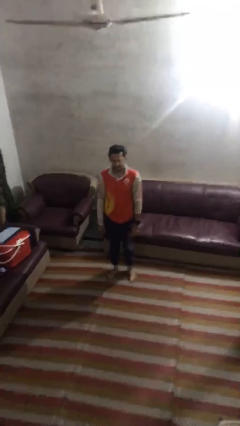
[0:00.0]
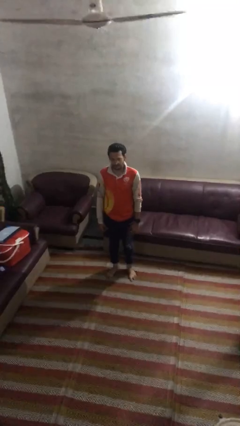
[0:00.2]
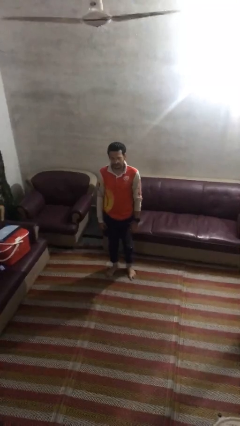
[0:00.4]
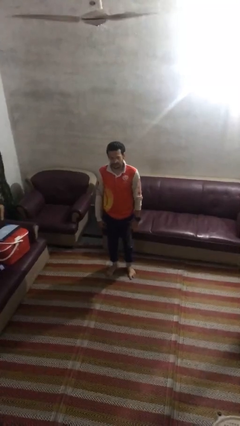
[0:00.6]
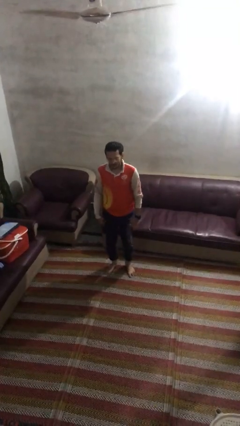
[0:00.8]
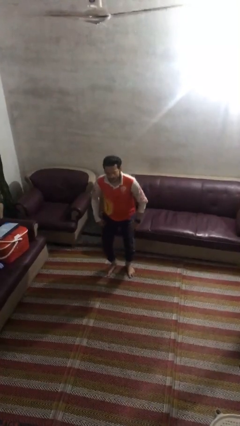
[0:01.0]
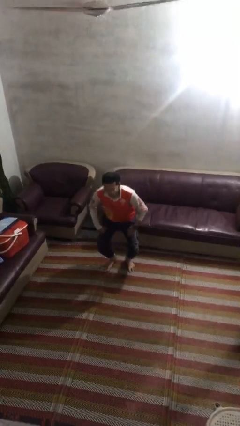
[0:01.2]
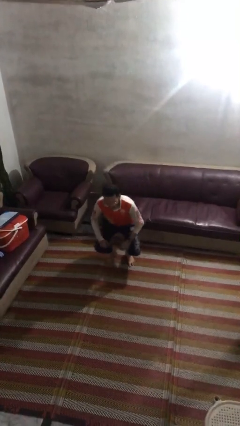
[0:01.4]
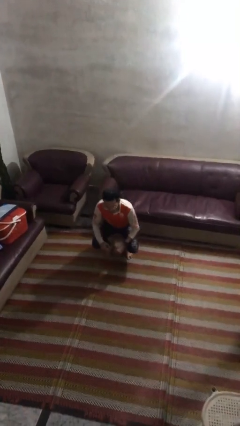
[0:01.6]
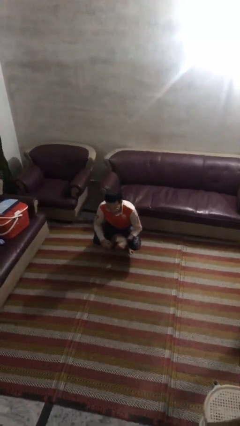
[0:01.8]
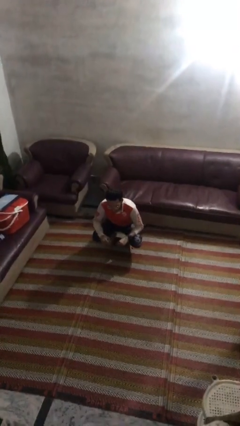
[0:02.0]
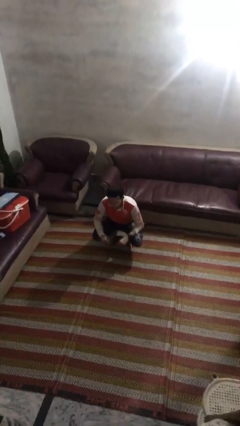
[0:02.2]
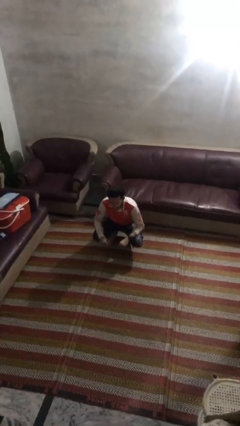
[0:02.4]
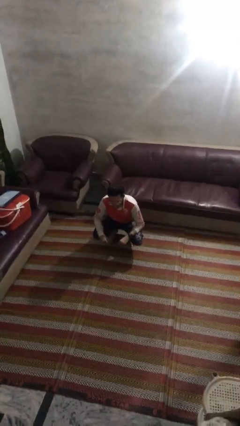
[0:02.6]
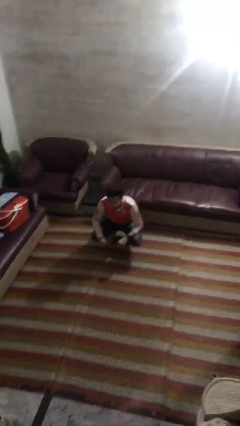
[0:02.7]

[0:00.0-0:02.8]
person squats

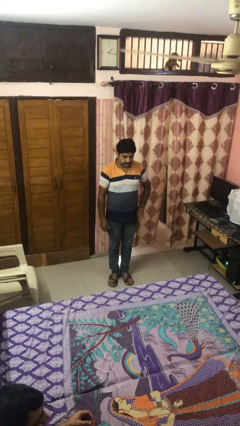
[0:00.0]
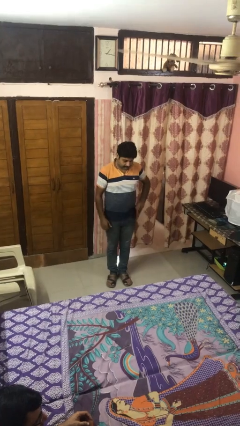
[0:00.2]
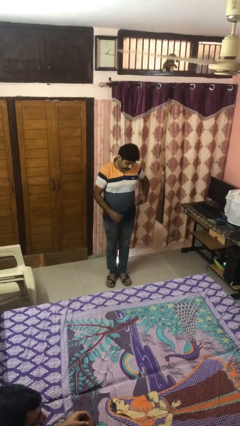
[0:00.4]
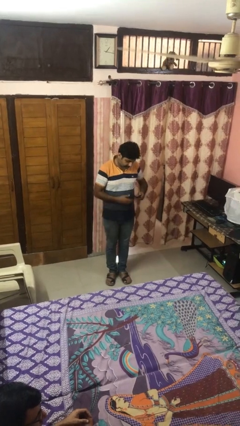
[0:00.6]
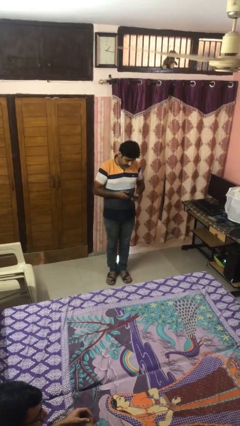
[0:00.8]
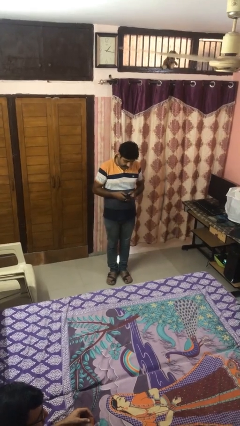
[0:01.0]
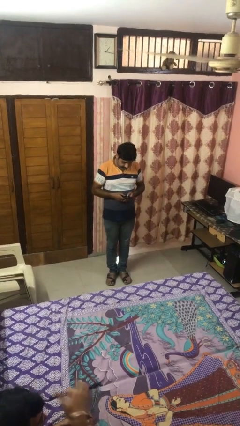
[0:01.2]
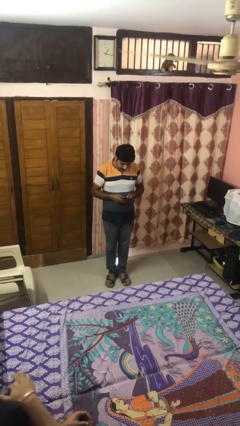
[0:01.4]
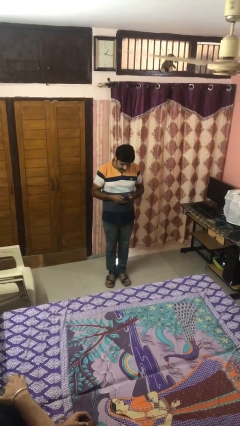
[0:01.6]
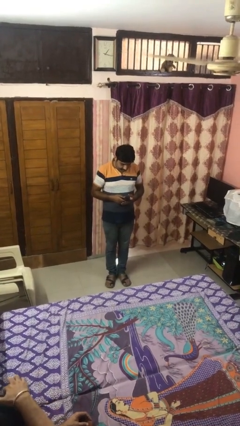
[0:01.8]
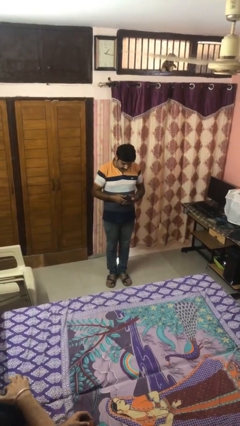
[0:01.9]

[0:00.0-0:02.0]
person takes phone from pocket

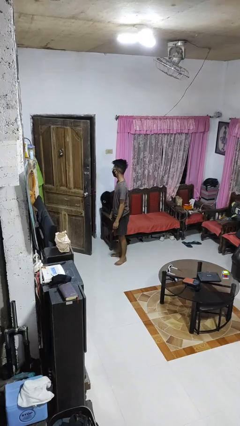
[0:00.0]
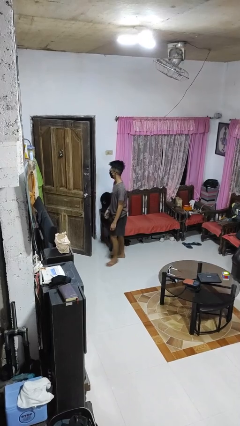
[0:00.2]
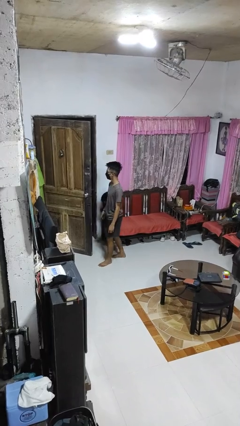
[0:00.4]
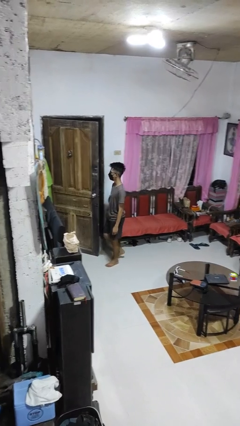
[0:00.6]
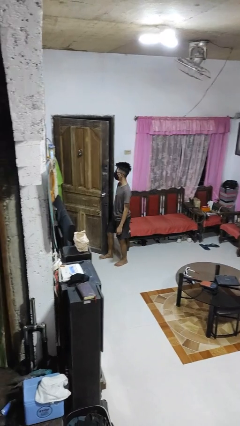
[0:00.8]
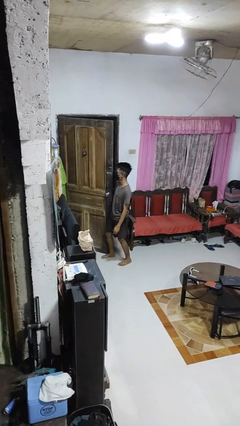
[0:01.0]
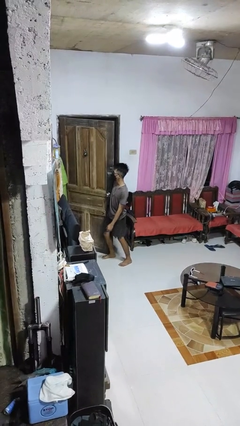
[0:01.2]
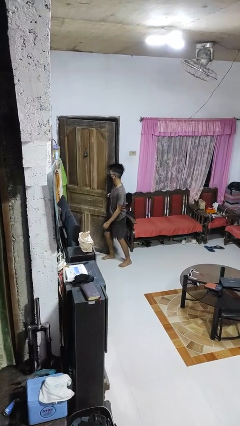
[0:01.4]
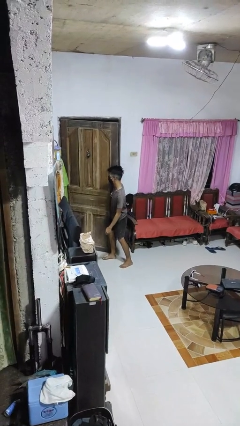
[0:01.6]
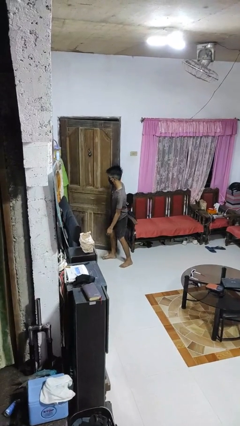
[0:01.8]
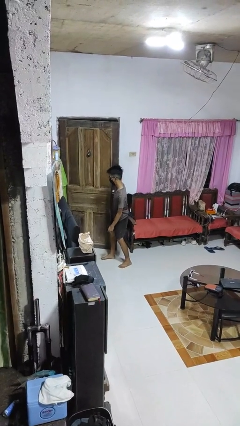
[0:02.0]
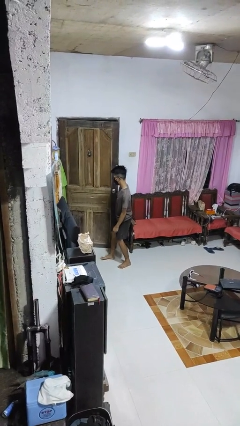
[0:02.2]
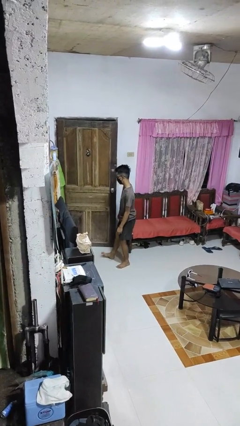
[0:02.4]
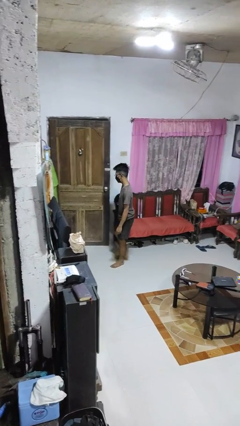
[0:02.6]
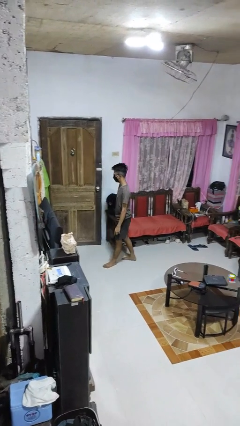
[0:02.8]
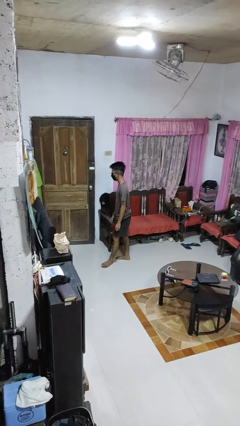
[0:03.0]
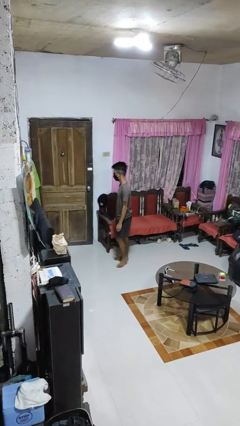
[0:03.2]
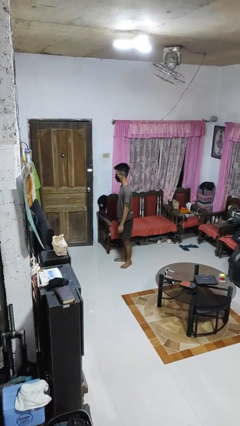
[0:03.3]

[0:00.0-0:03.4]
person closes door with hip

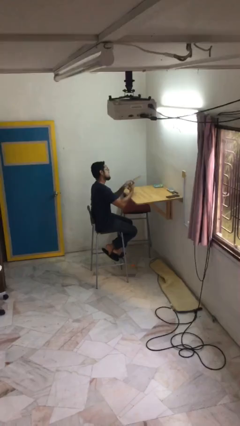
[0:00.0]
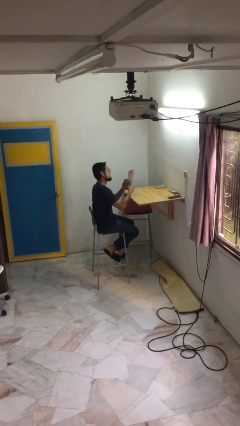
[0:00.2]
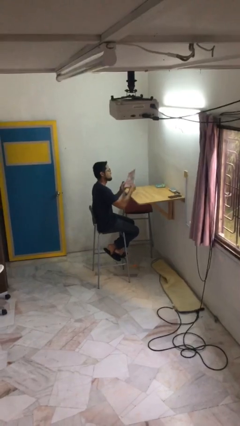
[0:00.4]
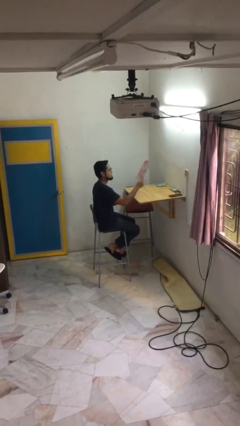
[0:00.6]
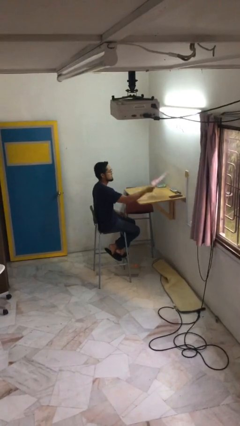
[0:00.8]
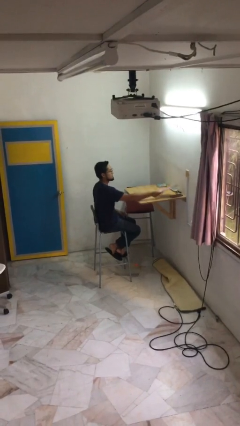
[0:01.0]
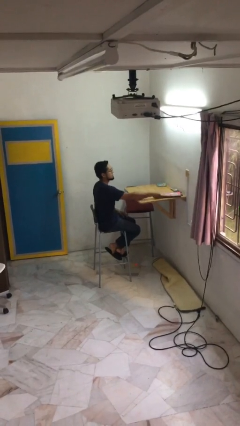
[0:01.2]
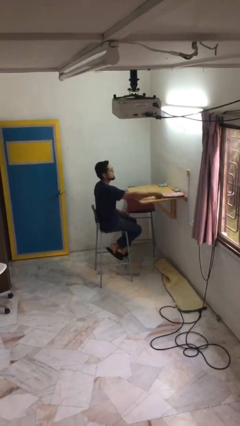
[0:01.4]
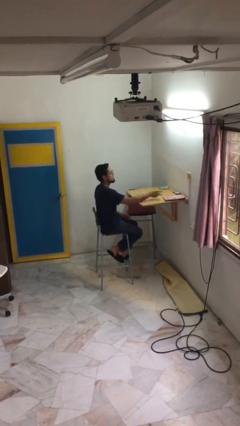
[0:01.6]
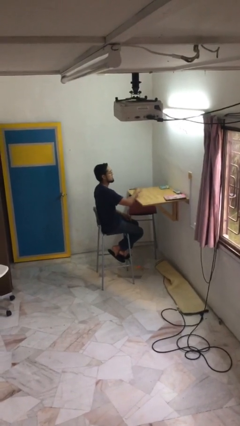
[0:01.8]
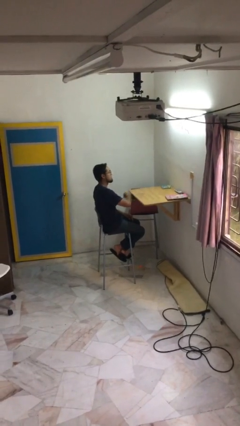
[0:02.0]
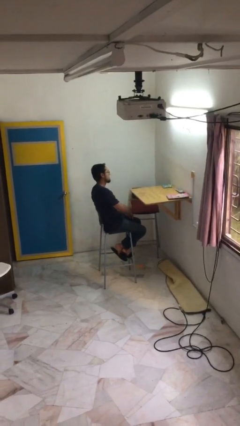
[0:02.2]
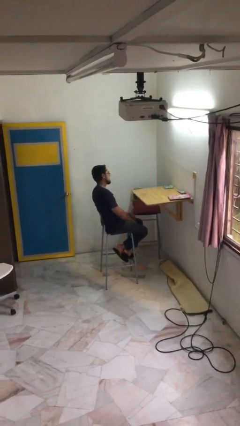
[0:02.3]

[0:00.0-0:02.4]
person puts down object on table

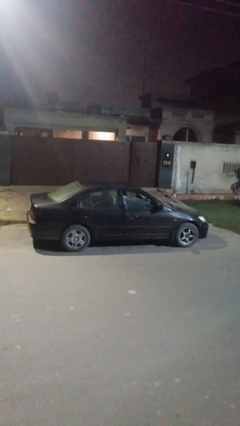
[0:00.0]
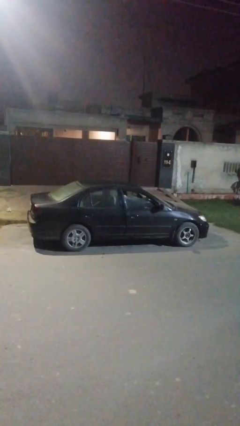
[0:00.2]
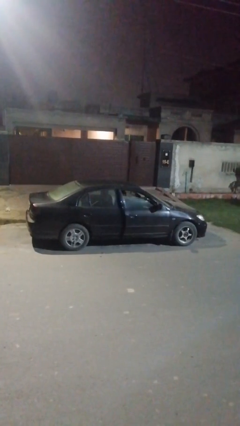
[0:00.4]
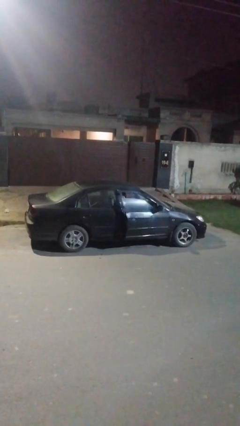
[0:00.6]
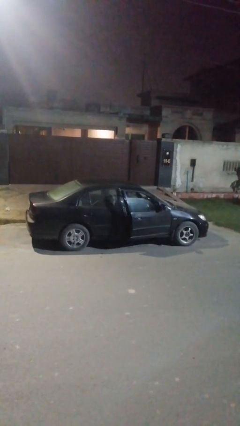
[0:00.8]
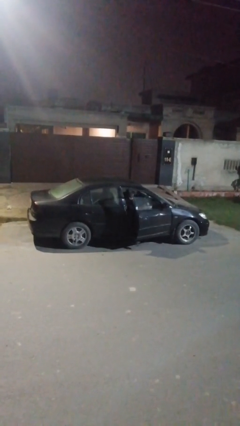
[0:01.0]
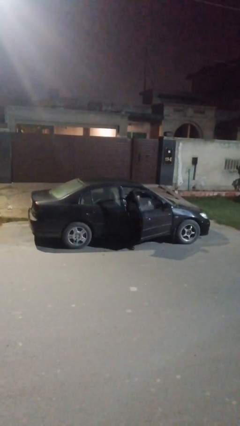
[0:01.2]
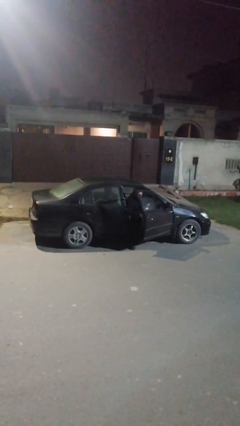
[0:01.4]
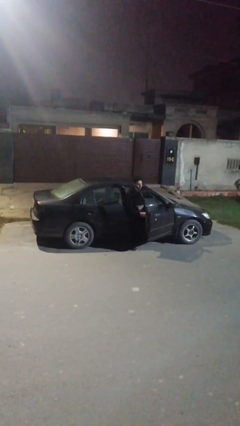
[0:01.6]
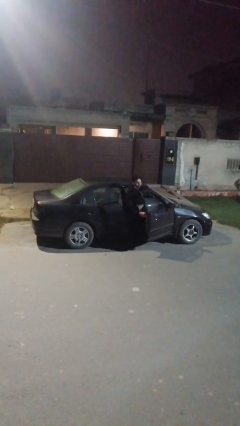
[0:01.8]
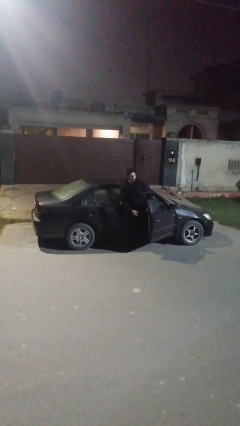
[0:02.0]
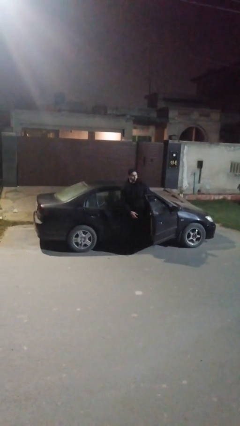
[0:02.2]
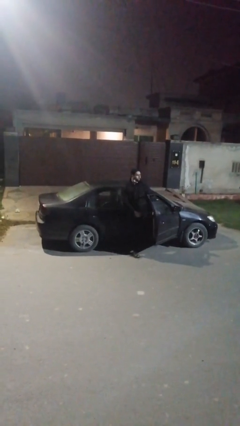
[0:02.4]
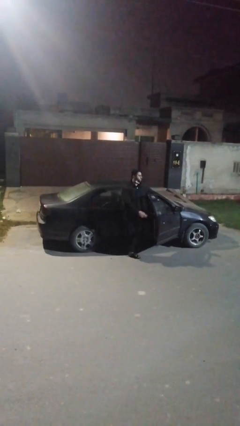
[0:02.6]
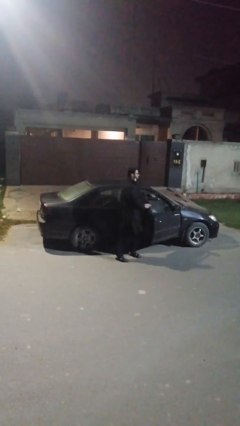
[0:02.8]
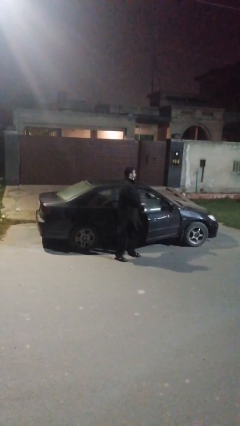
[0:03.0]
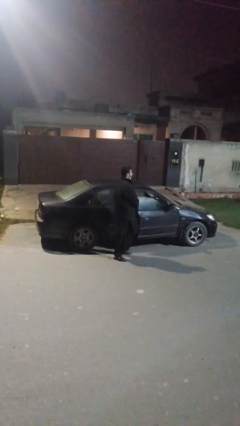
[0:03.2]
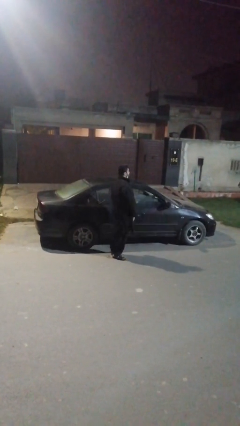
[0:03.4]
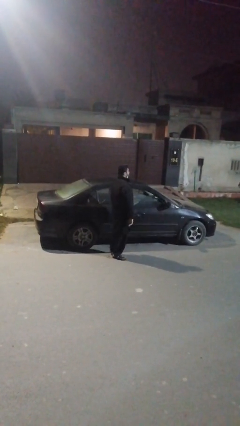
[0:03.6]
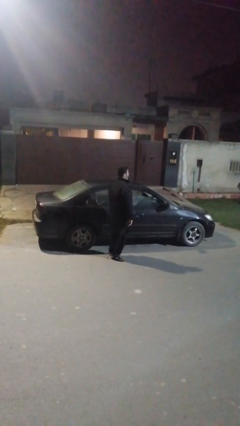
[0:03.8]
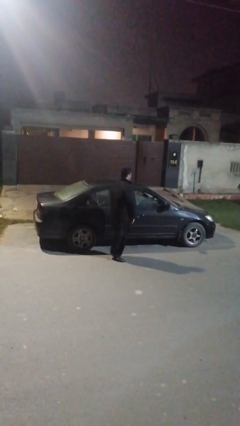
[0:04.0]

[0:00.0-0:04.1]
car drops off person

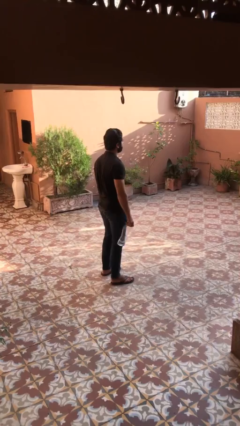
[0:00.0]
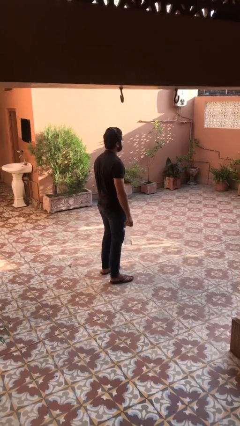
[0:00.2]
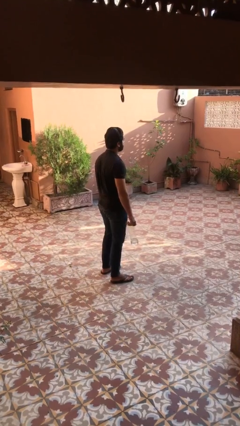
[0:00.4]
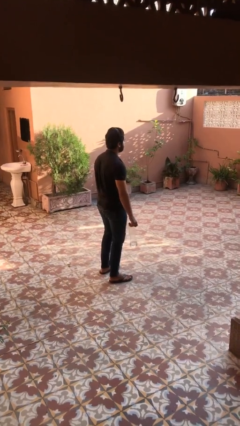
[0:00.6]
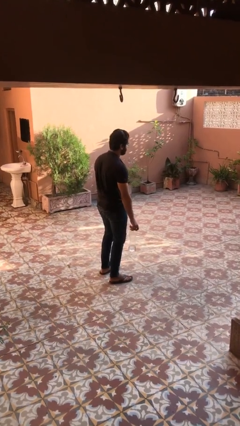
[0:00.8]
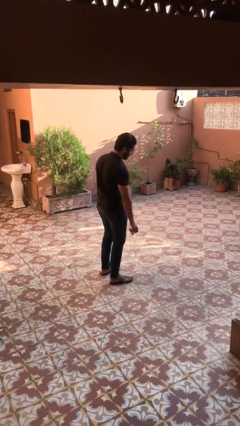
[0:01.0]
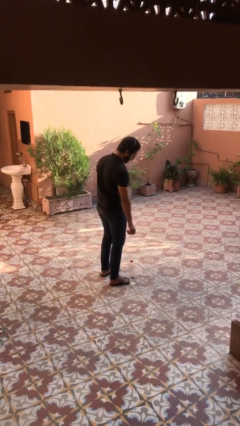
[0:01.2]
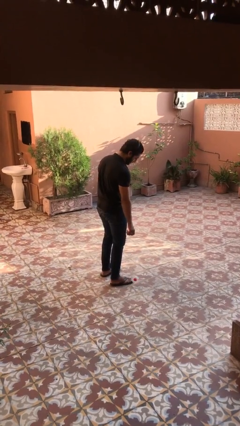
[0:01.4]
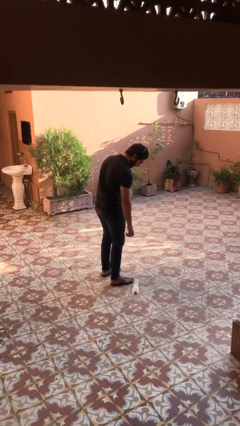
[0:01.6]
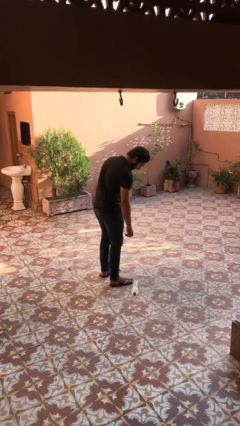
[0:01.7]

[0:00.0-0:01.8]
person throws object into air

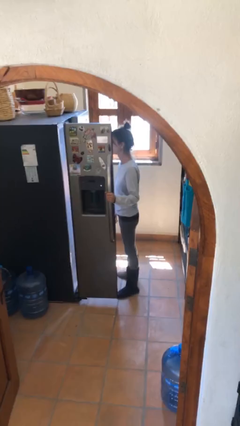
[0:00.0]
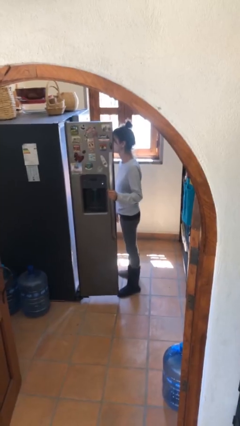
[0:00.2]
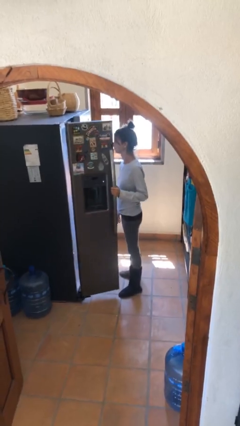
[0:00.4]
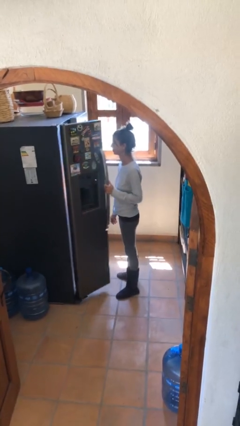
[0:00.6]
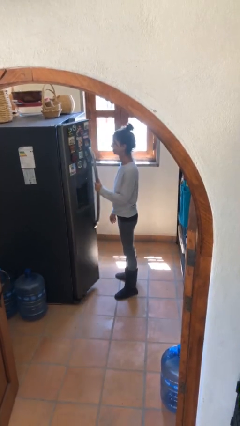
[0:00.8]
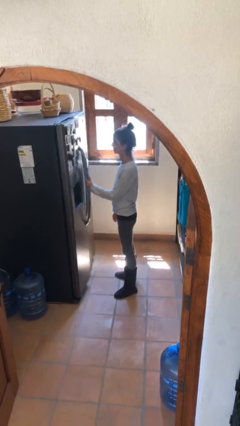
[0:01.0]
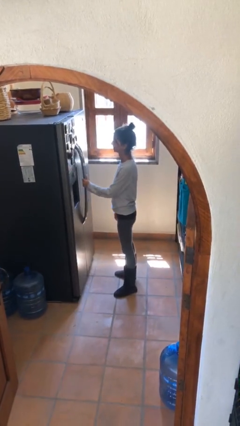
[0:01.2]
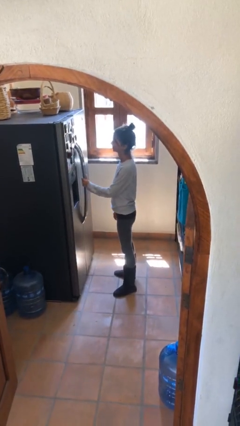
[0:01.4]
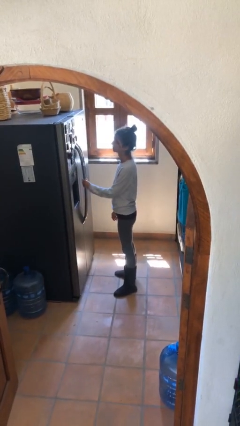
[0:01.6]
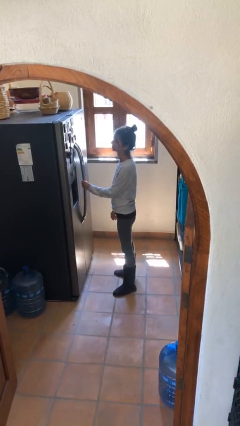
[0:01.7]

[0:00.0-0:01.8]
person closes refrigerator
